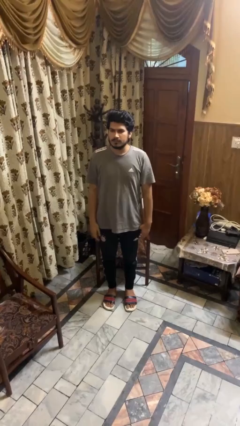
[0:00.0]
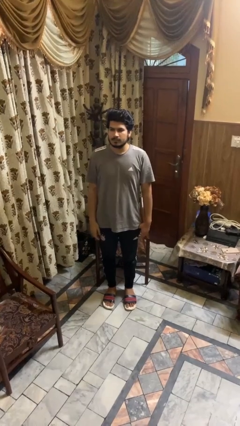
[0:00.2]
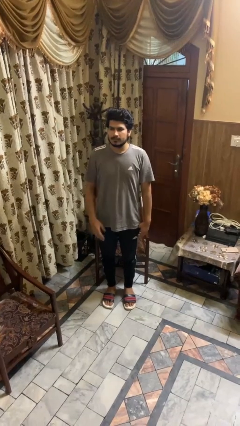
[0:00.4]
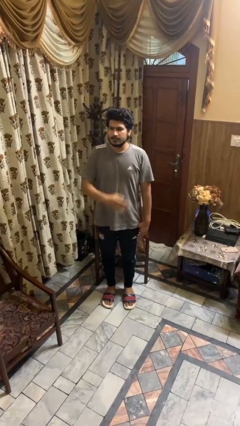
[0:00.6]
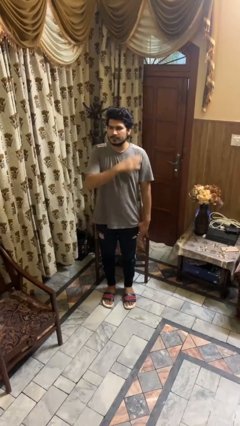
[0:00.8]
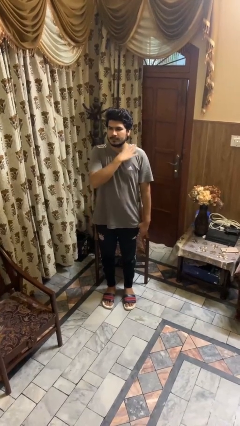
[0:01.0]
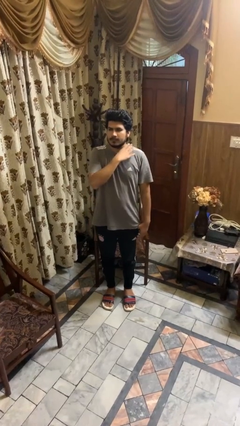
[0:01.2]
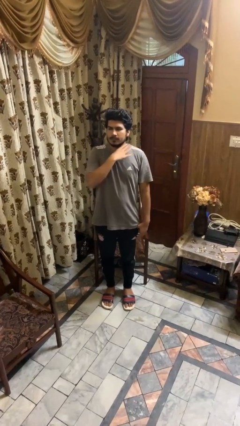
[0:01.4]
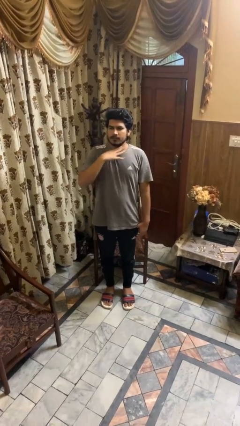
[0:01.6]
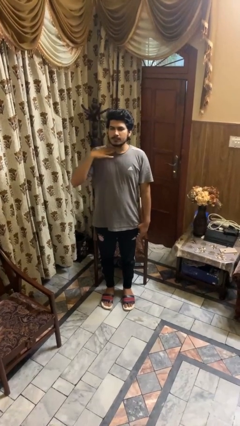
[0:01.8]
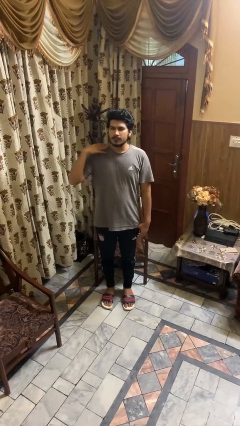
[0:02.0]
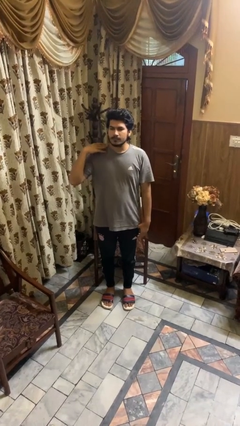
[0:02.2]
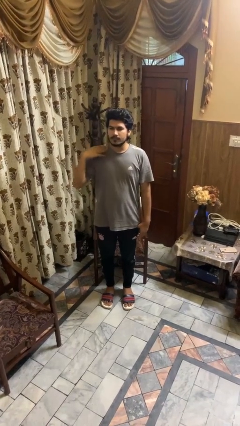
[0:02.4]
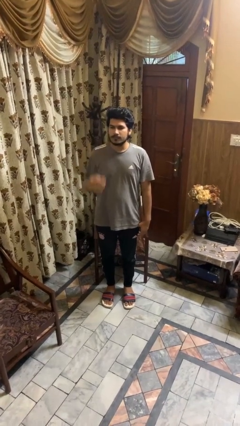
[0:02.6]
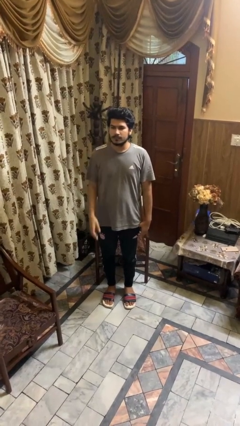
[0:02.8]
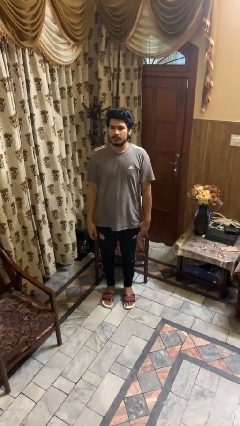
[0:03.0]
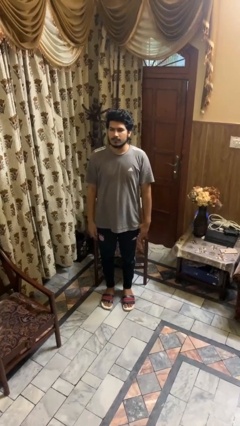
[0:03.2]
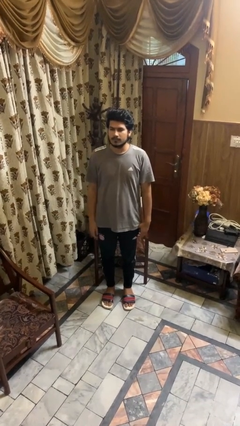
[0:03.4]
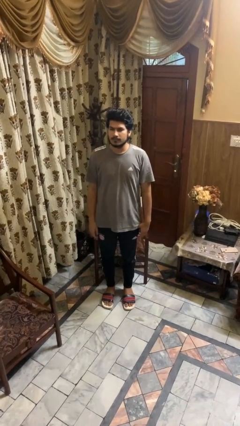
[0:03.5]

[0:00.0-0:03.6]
person gestures cut

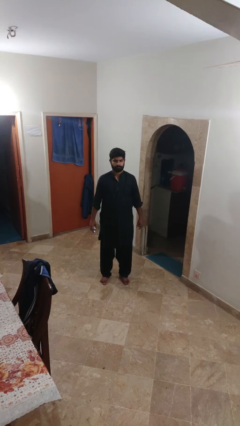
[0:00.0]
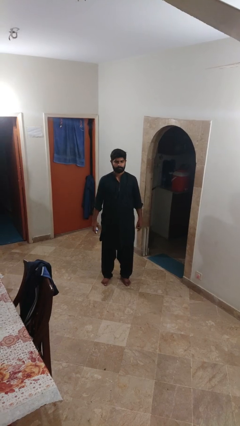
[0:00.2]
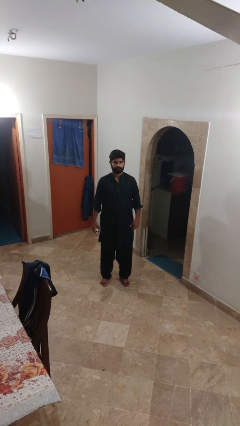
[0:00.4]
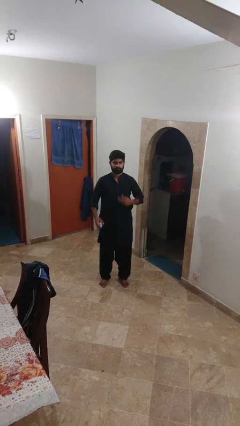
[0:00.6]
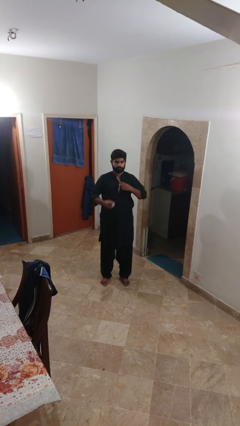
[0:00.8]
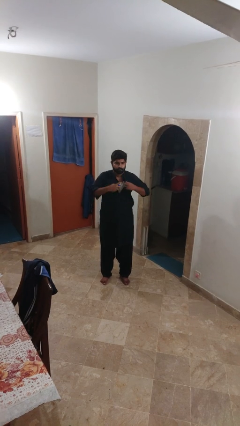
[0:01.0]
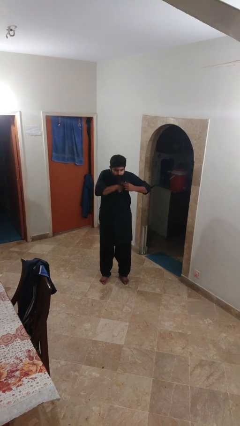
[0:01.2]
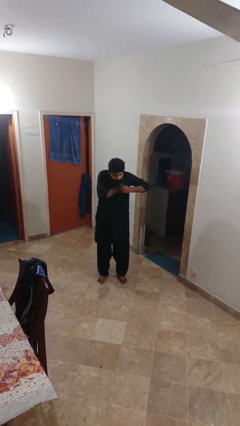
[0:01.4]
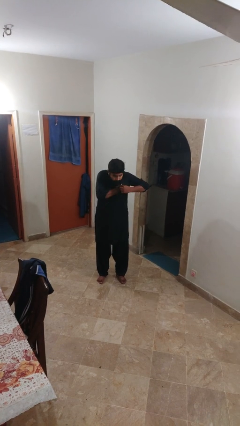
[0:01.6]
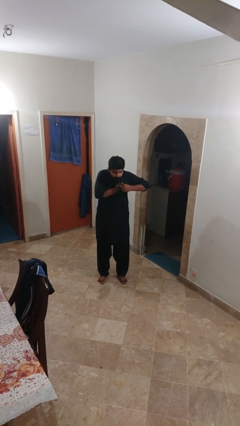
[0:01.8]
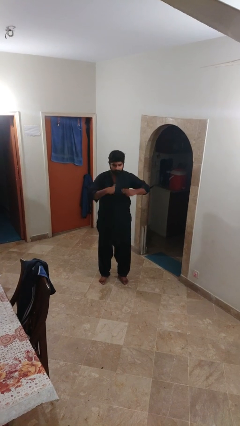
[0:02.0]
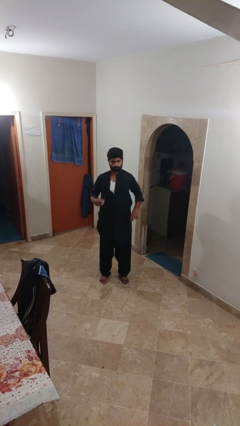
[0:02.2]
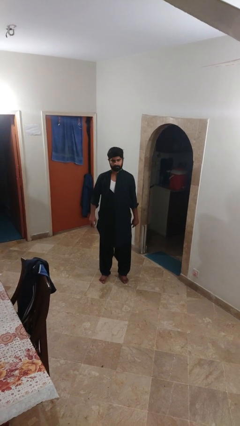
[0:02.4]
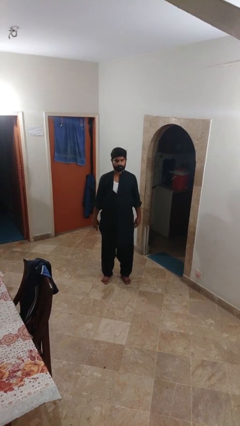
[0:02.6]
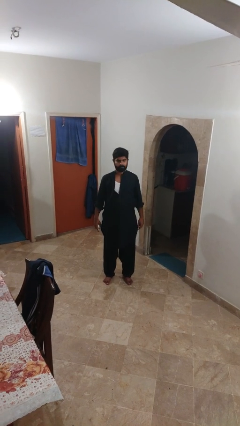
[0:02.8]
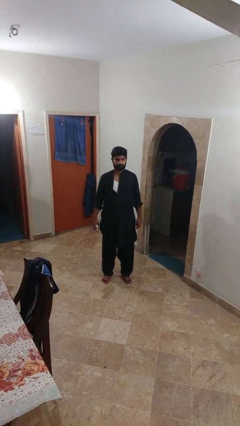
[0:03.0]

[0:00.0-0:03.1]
person applies deodorant

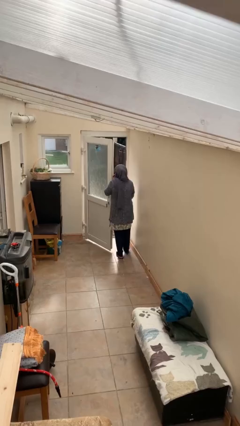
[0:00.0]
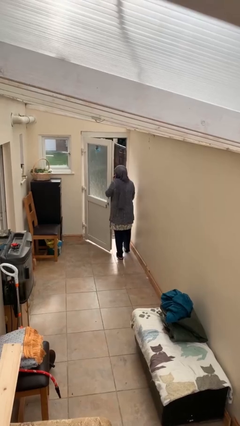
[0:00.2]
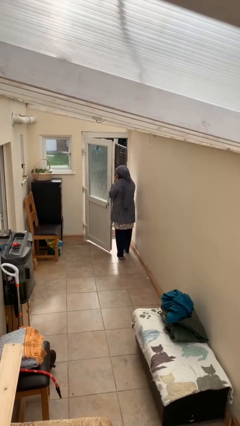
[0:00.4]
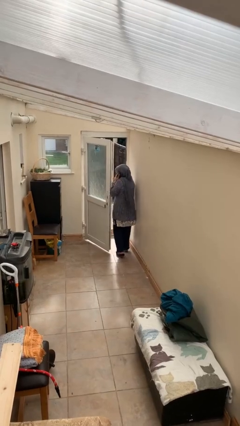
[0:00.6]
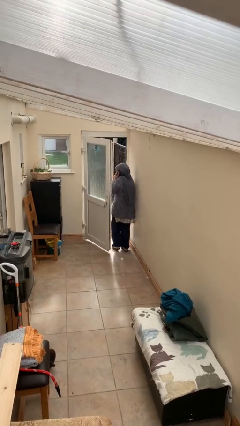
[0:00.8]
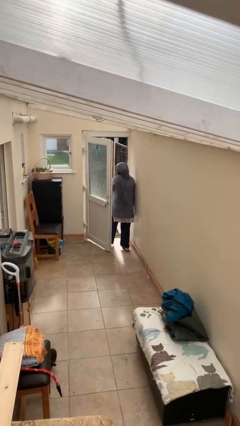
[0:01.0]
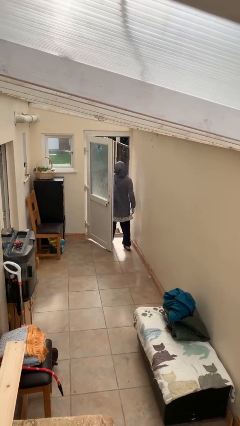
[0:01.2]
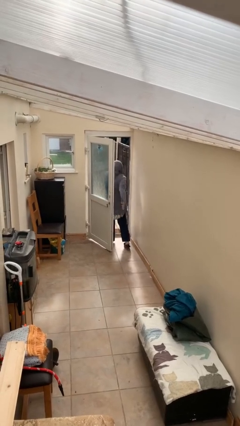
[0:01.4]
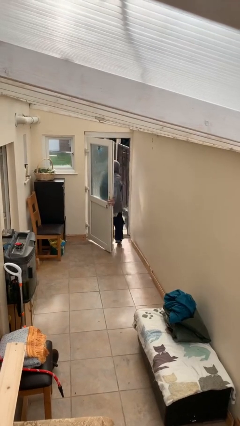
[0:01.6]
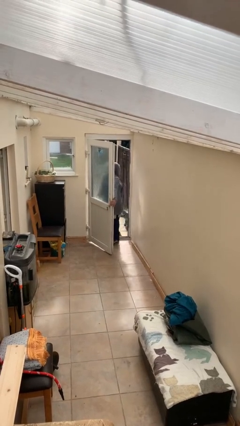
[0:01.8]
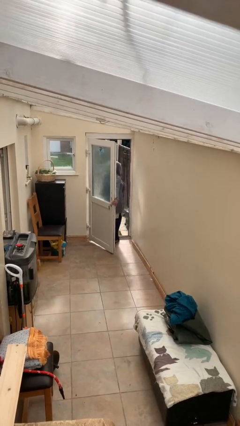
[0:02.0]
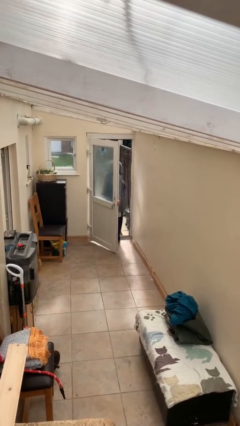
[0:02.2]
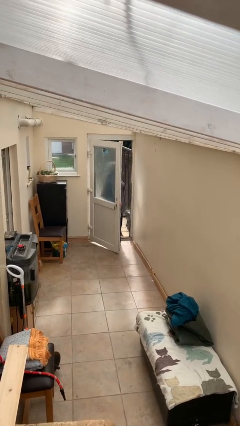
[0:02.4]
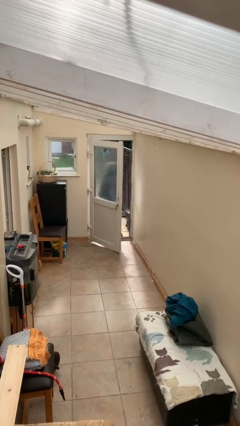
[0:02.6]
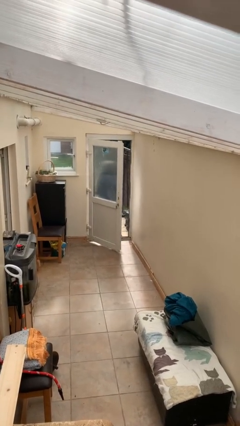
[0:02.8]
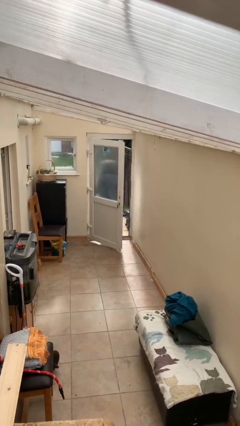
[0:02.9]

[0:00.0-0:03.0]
person exits scene through structure

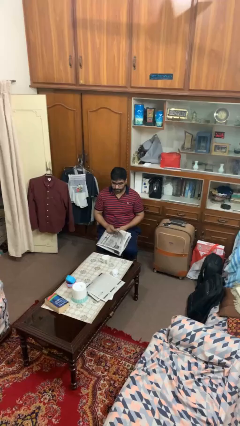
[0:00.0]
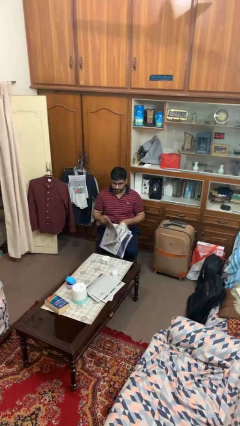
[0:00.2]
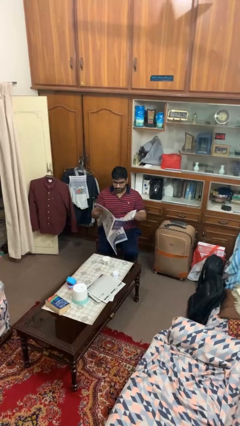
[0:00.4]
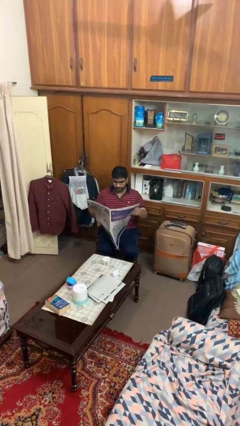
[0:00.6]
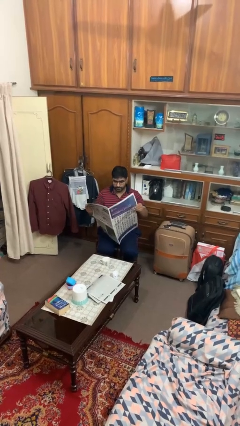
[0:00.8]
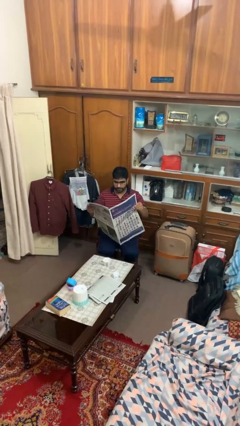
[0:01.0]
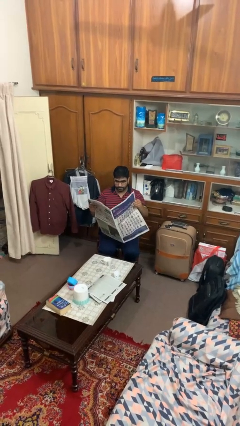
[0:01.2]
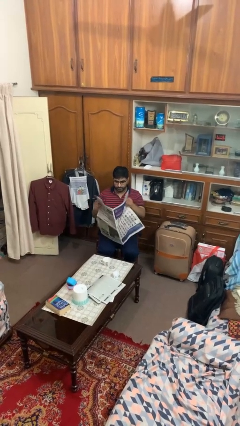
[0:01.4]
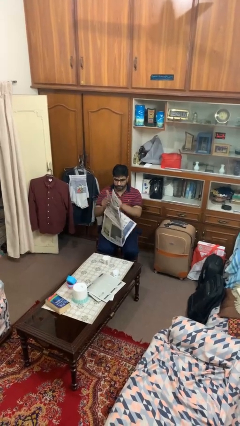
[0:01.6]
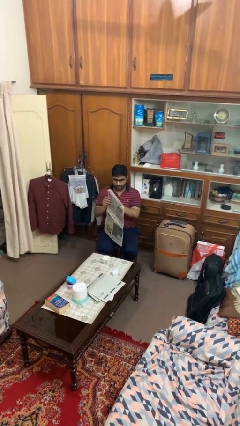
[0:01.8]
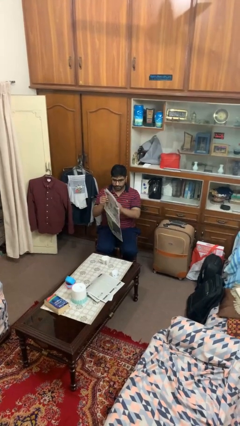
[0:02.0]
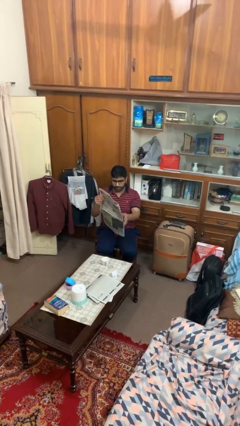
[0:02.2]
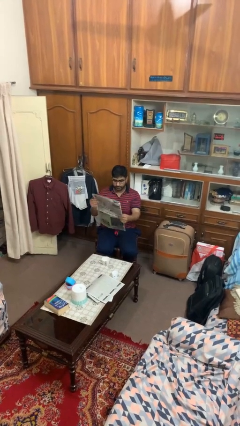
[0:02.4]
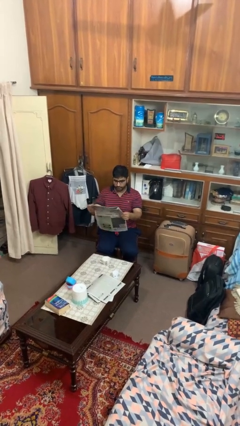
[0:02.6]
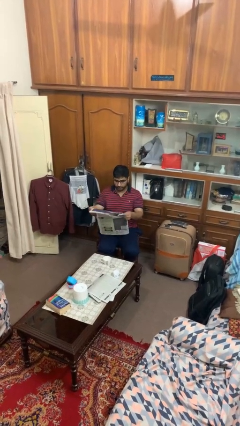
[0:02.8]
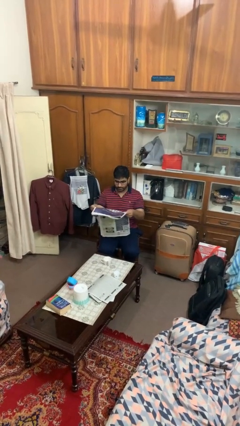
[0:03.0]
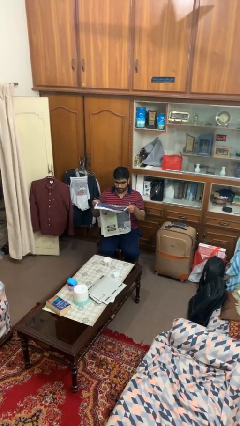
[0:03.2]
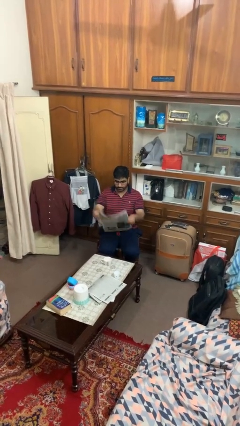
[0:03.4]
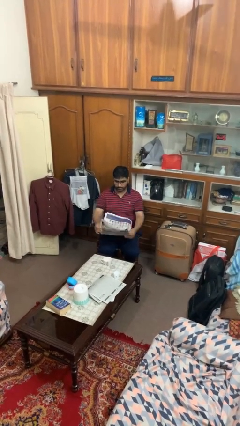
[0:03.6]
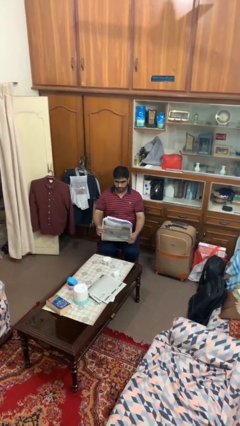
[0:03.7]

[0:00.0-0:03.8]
person reads newspaper

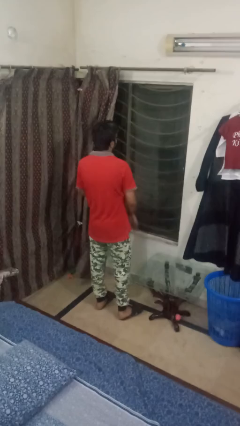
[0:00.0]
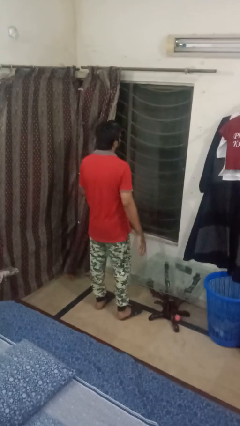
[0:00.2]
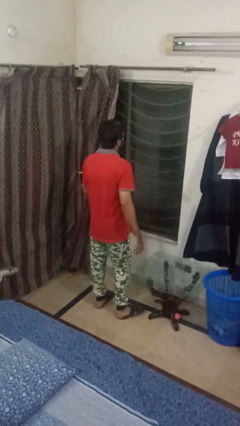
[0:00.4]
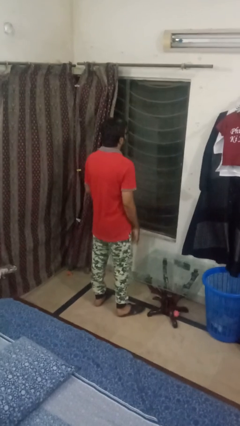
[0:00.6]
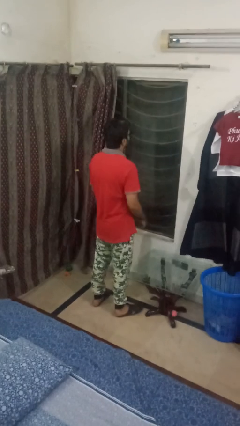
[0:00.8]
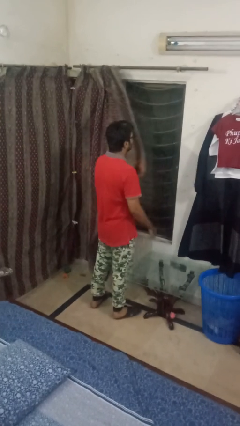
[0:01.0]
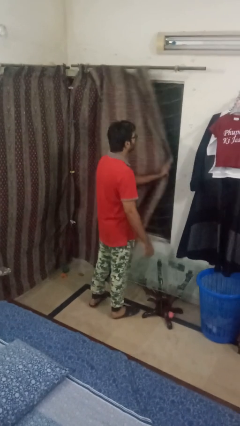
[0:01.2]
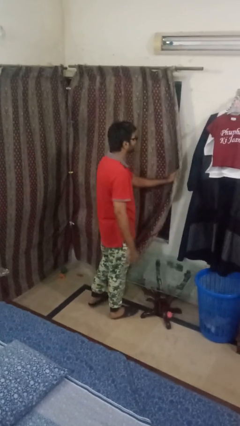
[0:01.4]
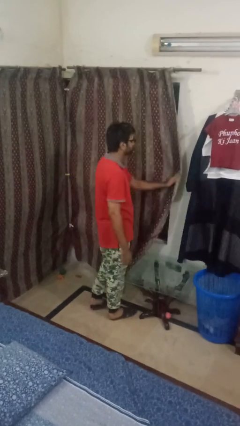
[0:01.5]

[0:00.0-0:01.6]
person closes curtains

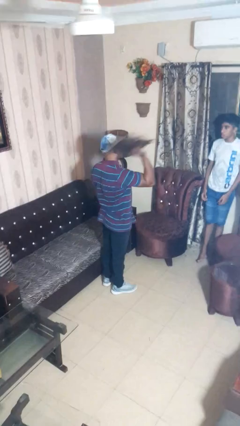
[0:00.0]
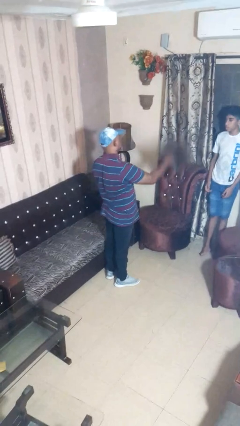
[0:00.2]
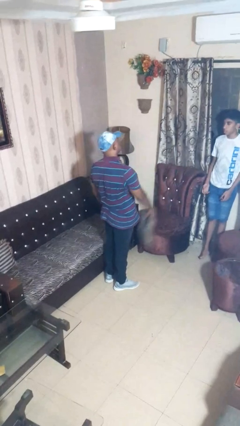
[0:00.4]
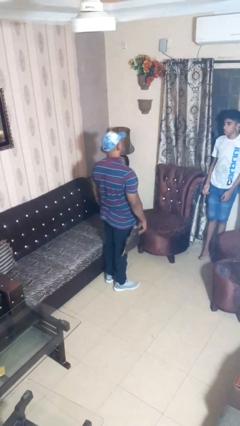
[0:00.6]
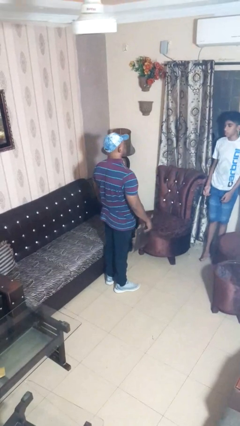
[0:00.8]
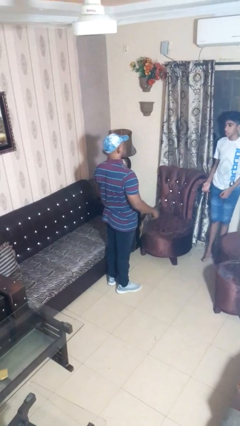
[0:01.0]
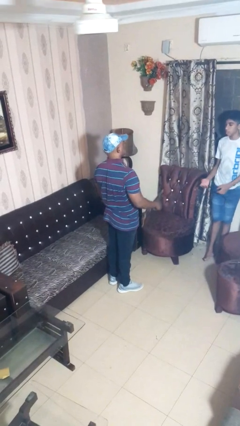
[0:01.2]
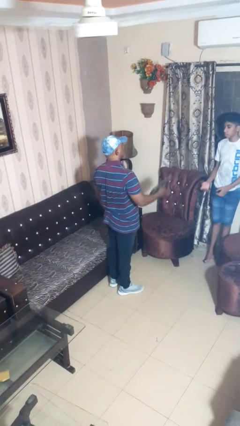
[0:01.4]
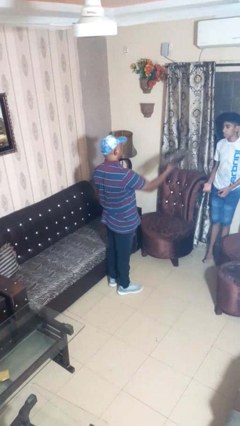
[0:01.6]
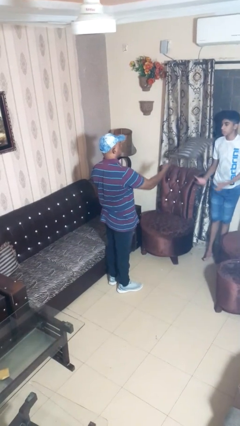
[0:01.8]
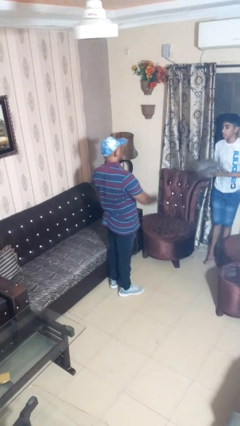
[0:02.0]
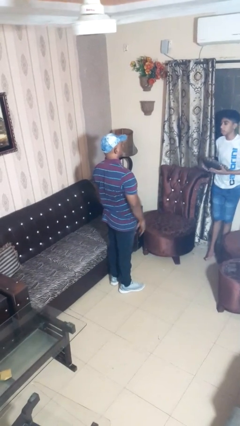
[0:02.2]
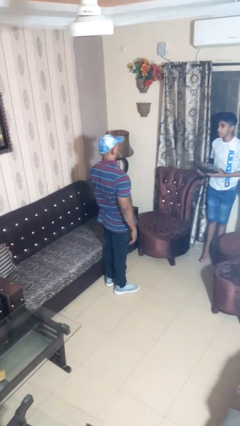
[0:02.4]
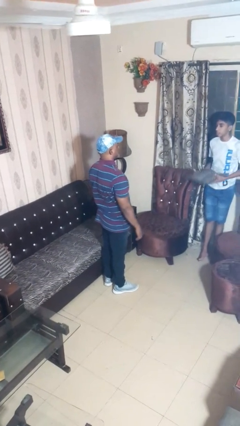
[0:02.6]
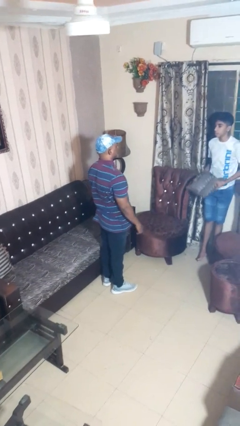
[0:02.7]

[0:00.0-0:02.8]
person throws object to person
